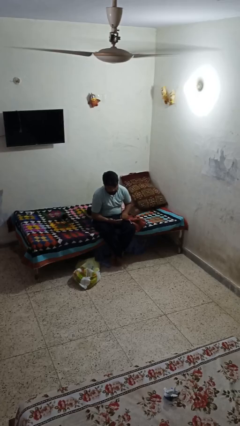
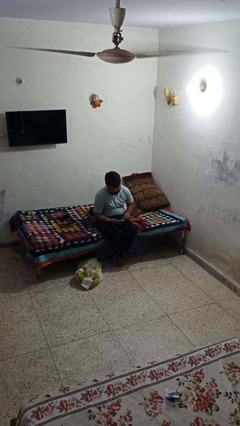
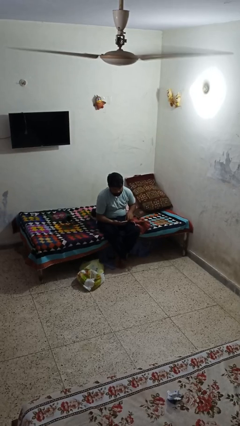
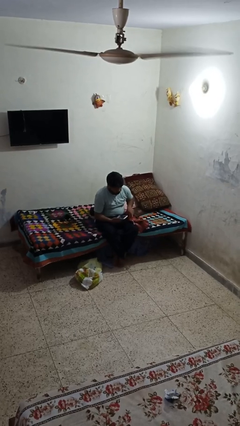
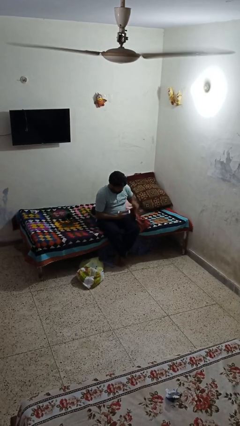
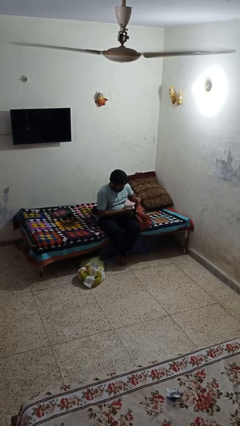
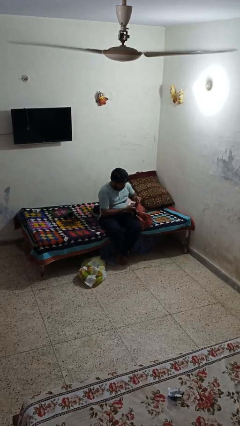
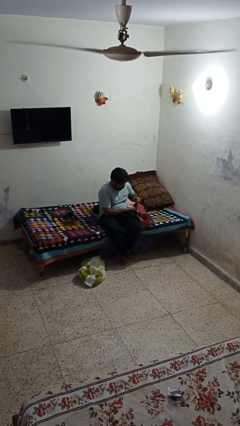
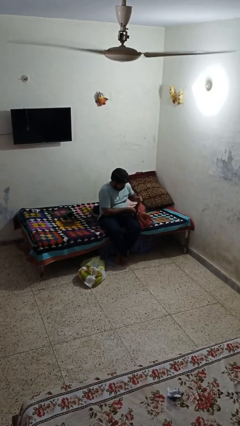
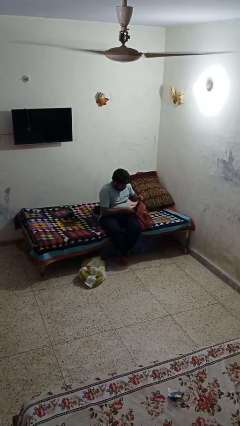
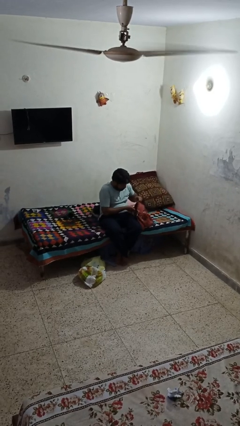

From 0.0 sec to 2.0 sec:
person puts object into purse

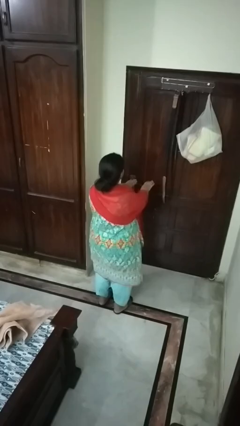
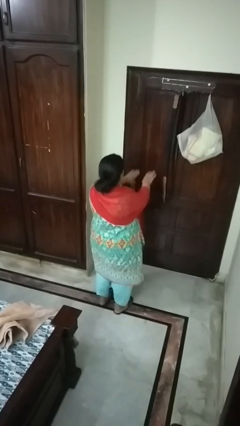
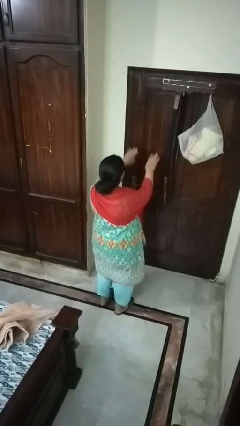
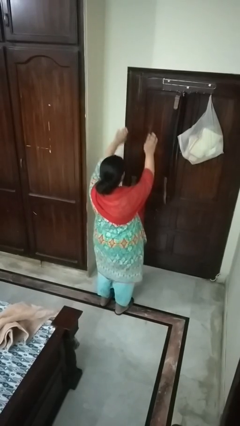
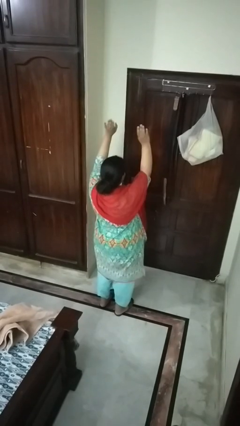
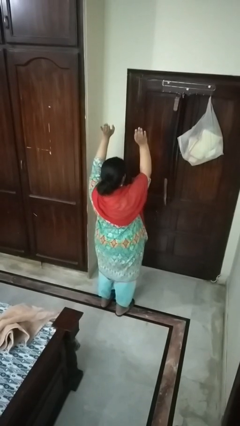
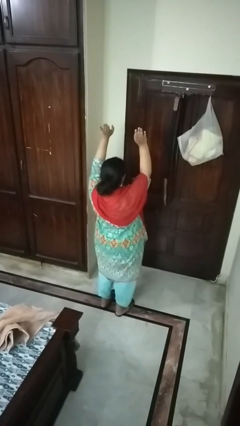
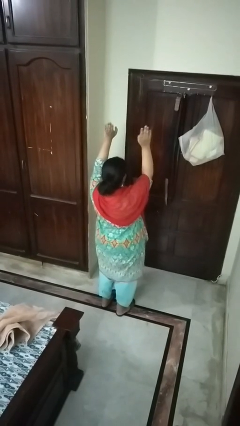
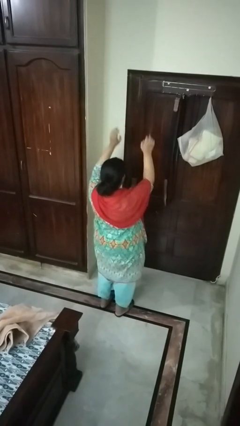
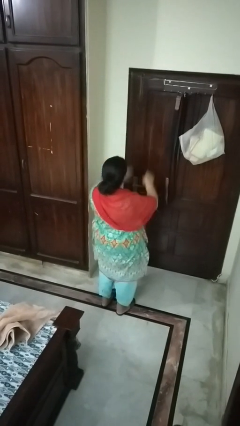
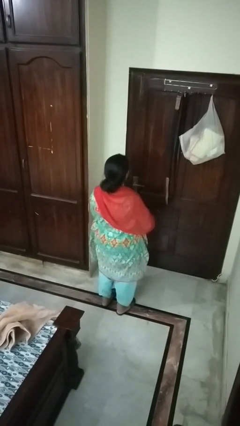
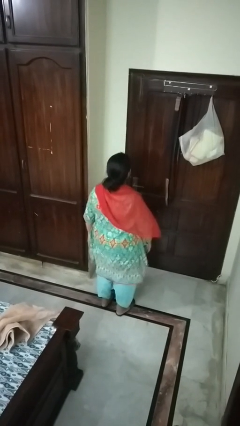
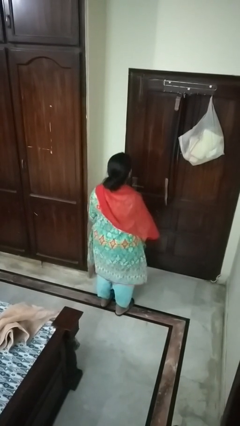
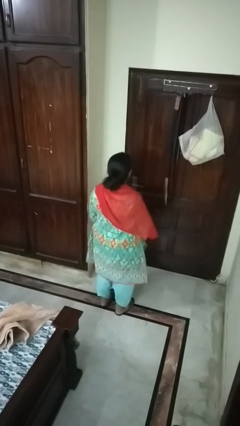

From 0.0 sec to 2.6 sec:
person stretches arms over head

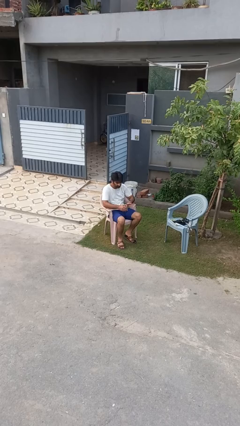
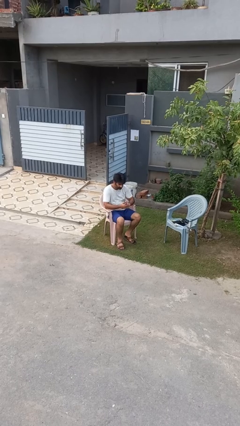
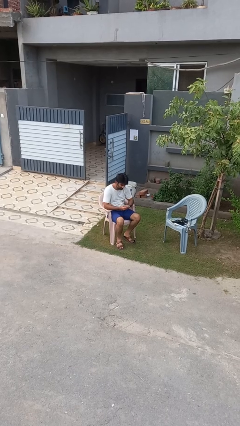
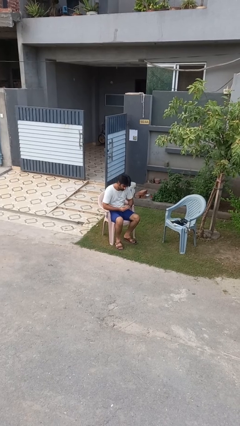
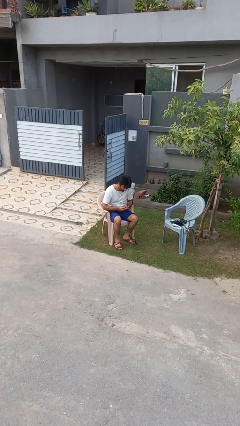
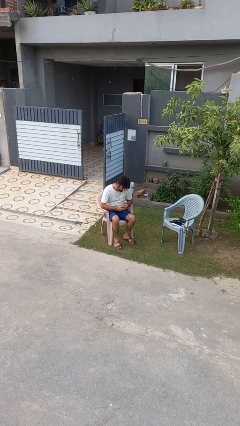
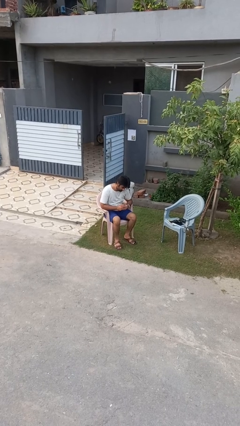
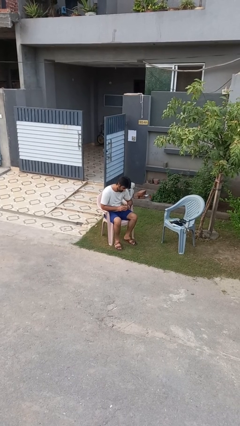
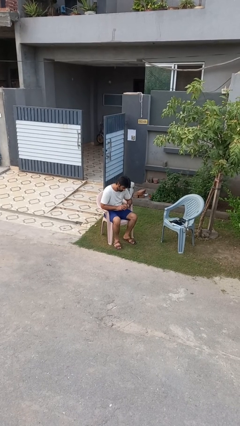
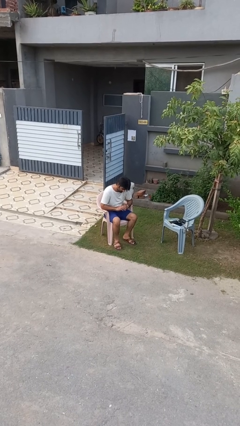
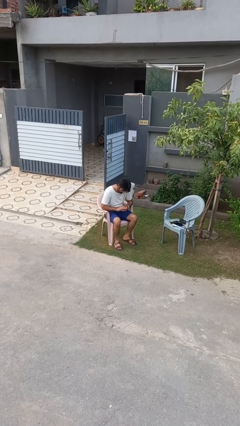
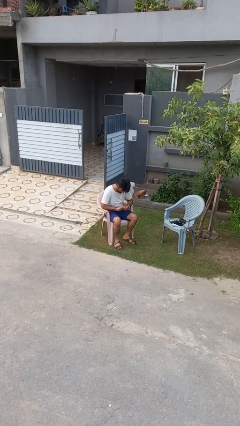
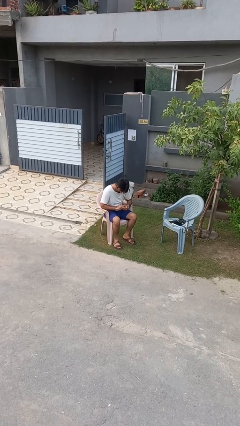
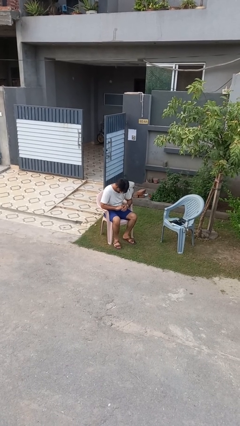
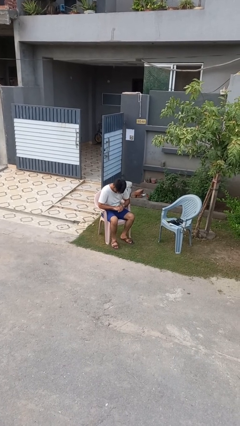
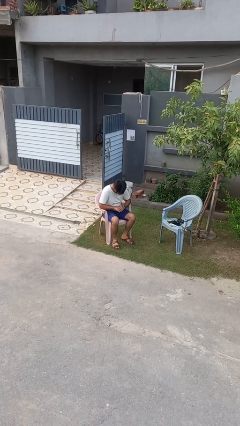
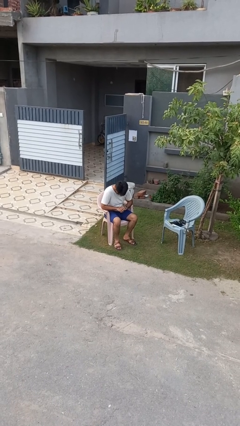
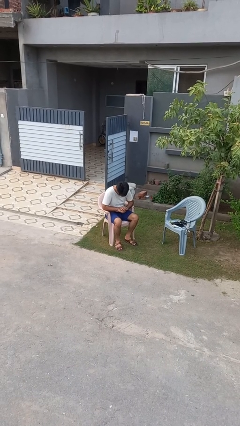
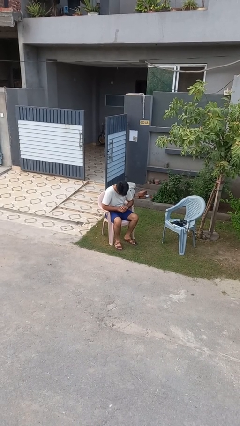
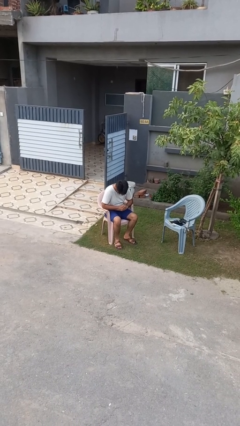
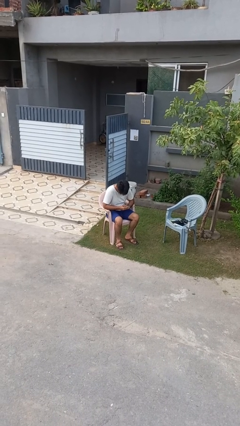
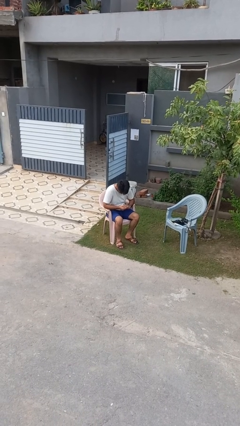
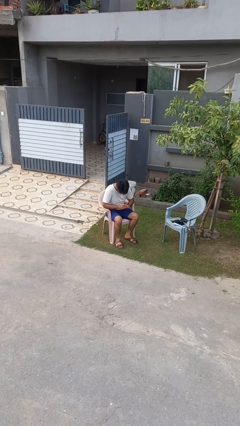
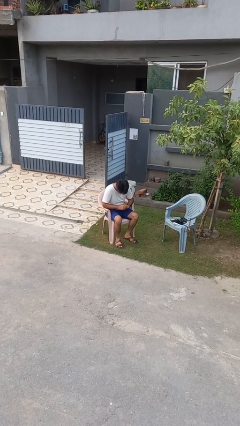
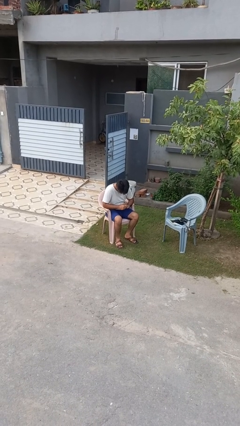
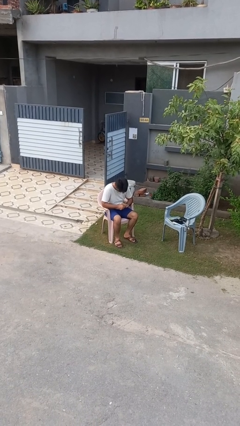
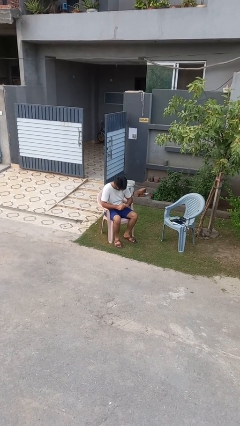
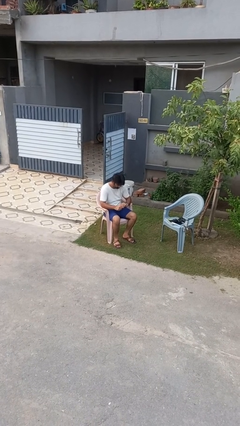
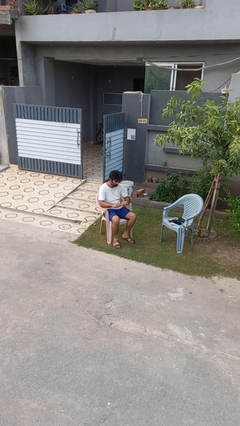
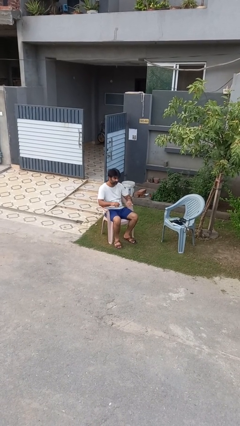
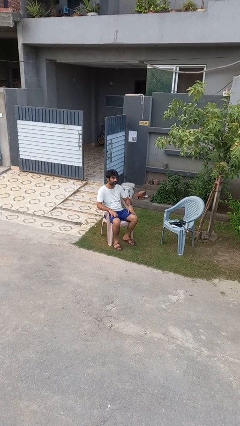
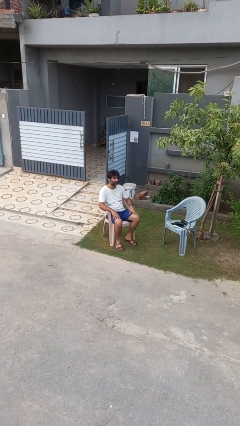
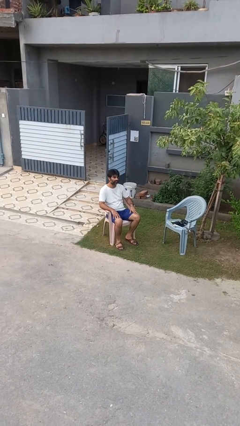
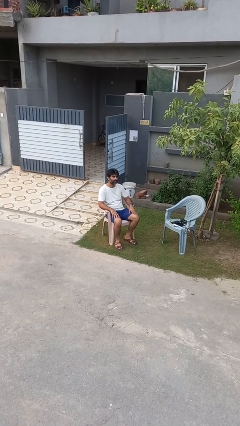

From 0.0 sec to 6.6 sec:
person looks at hands in lap

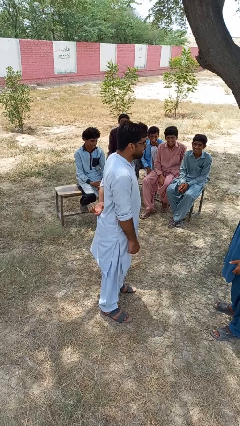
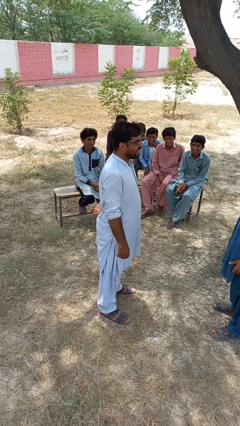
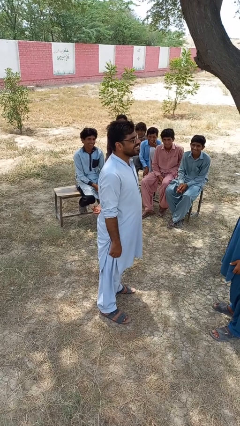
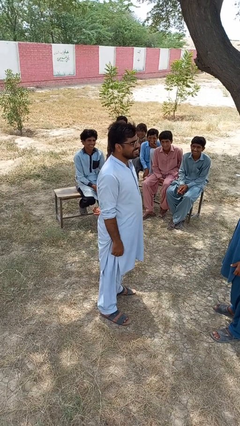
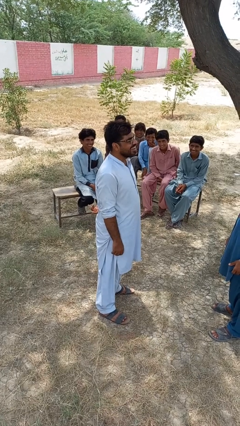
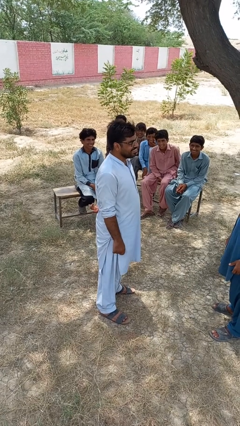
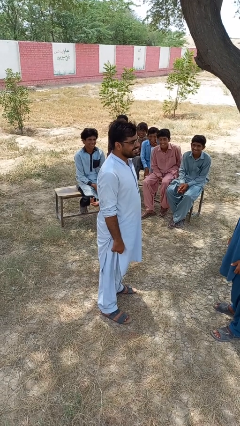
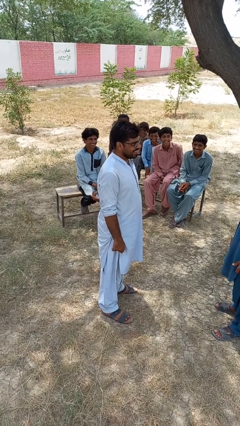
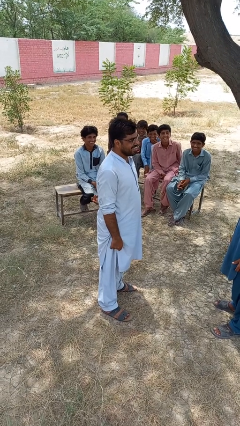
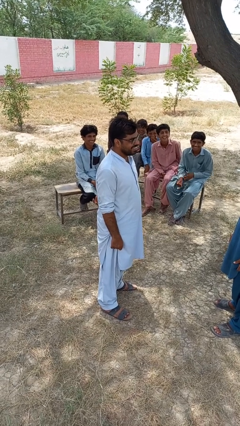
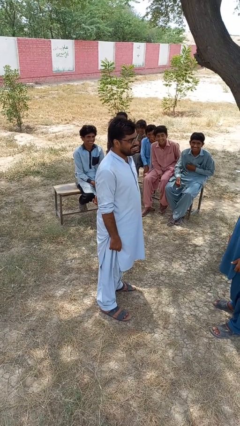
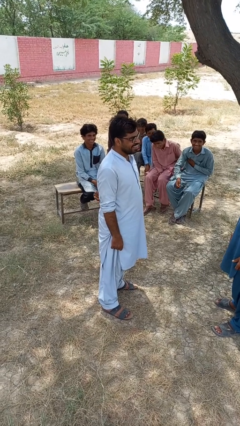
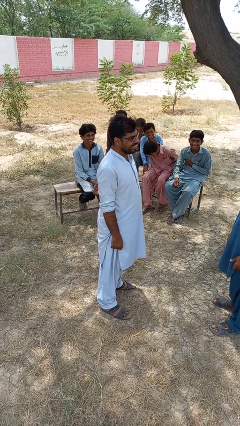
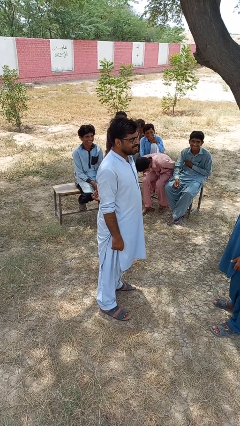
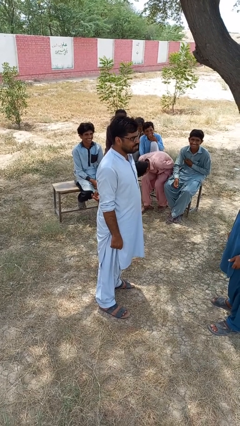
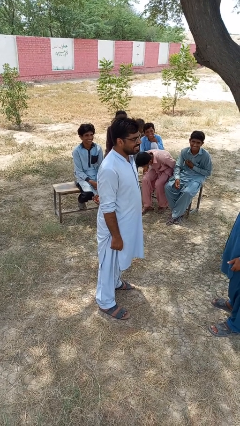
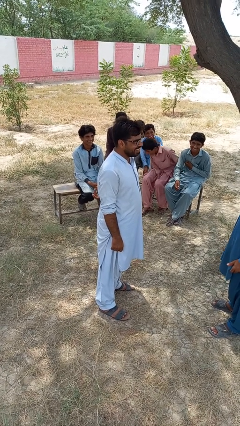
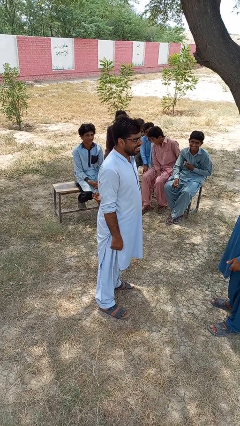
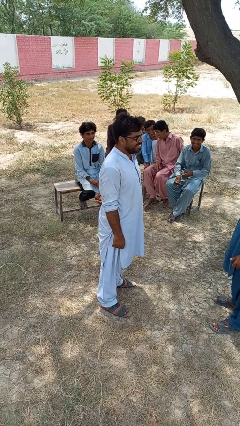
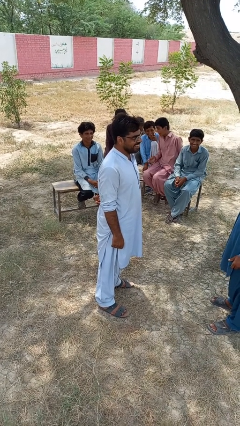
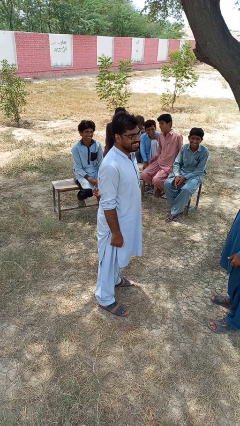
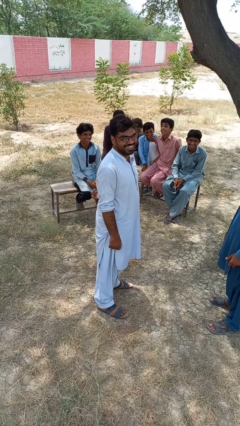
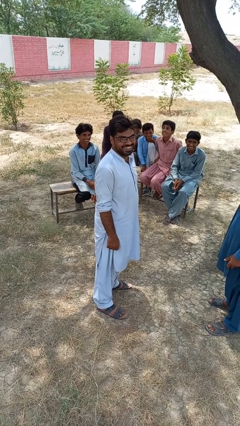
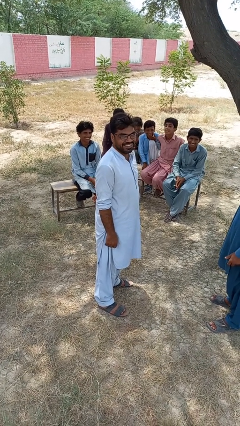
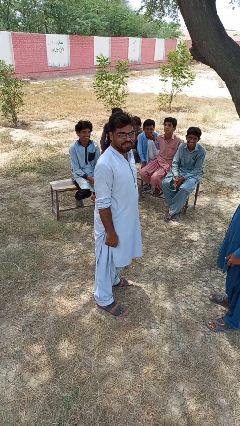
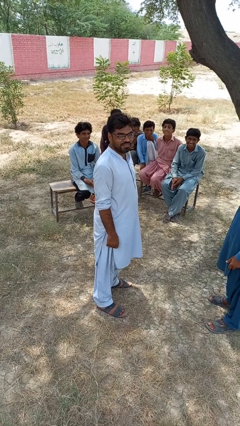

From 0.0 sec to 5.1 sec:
person laughs with person

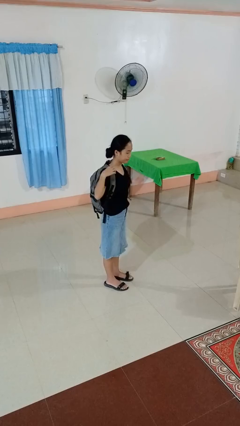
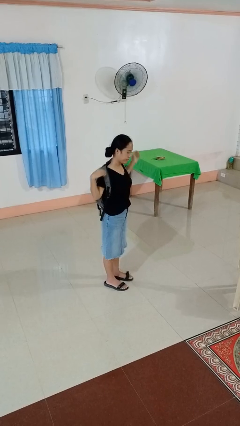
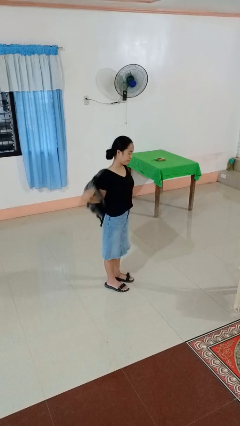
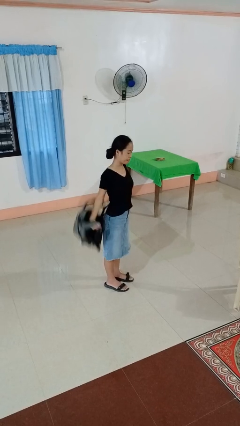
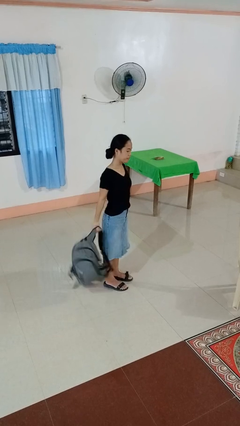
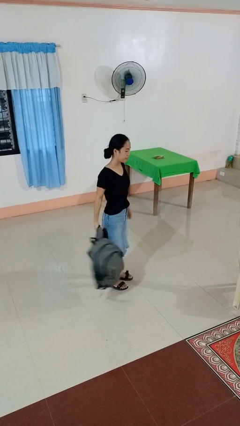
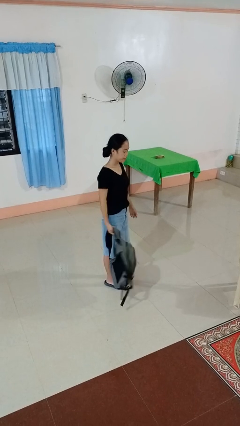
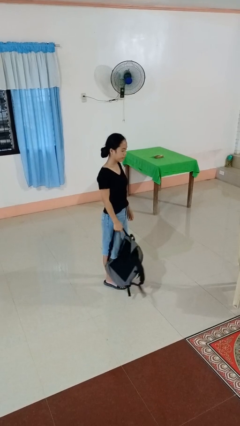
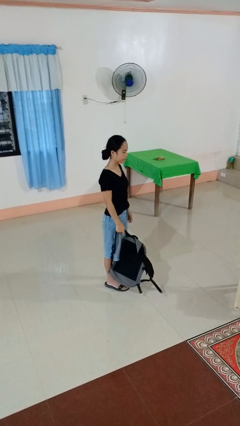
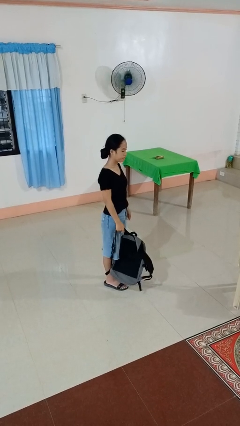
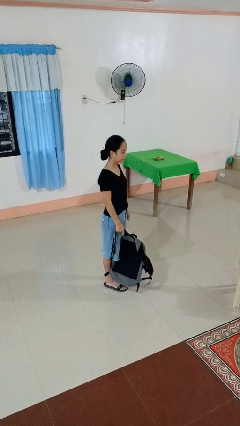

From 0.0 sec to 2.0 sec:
person takes off backpack
